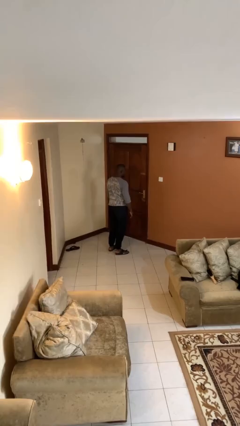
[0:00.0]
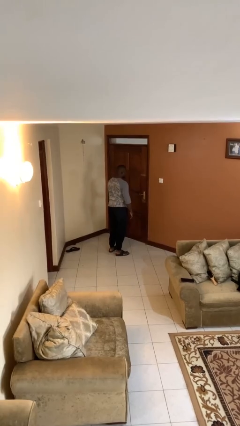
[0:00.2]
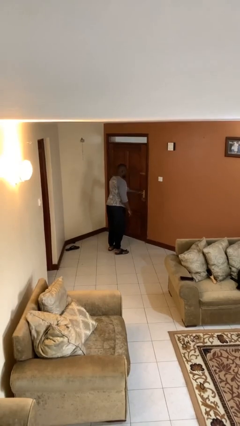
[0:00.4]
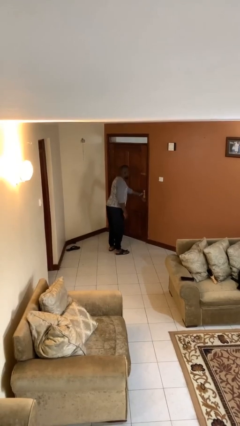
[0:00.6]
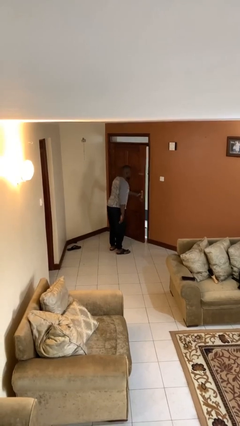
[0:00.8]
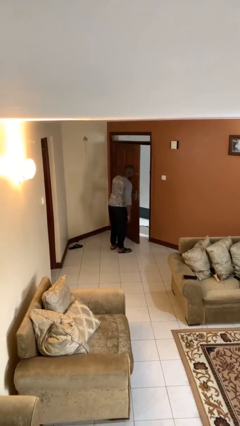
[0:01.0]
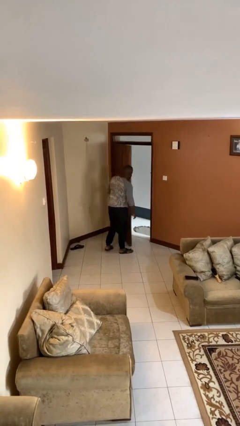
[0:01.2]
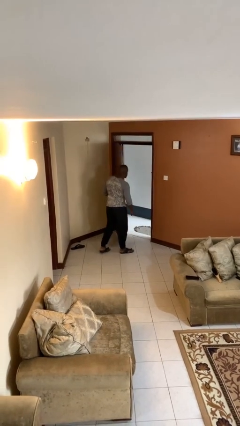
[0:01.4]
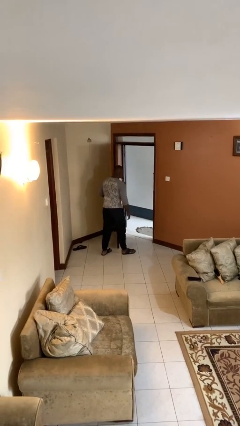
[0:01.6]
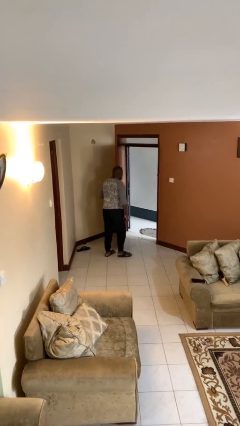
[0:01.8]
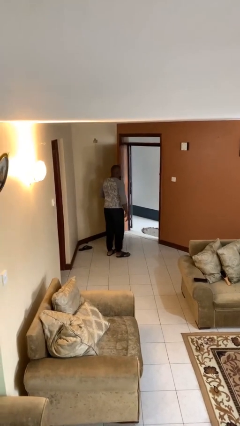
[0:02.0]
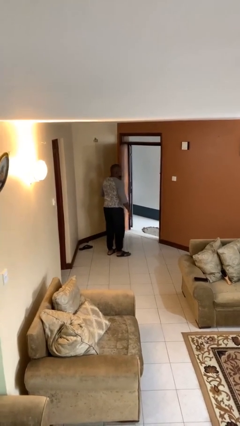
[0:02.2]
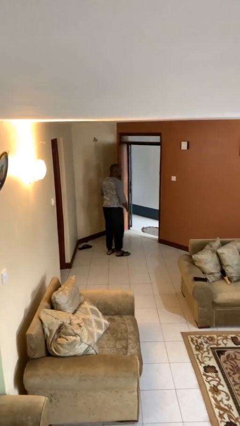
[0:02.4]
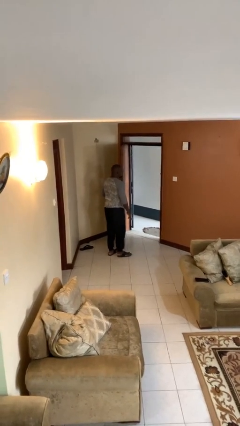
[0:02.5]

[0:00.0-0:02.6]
person opens facility door

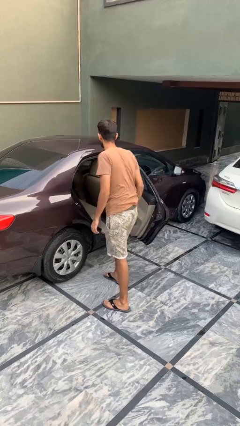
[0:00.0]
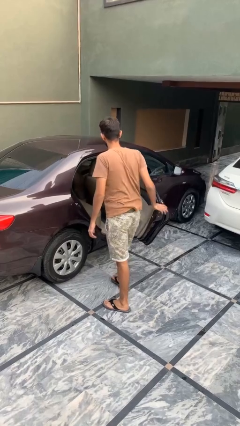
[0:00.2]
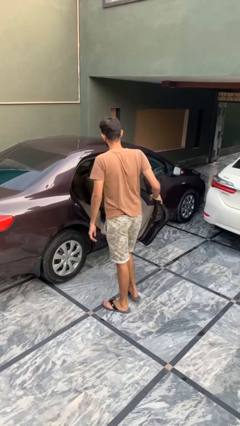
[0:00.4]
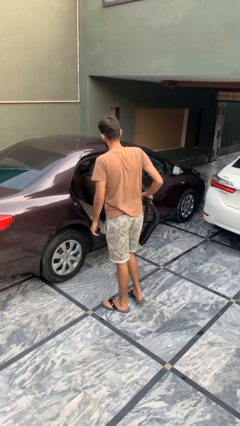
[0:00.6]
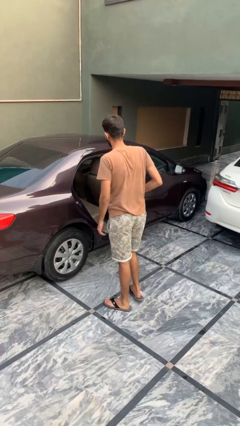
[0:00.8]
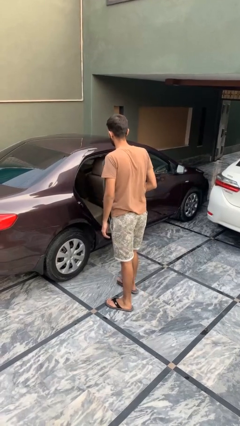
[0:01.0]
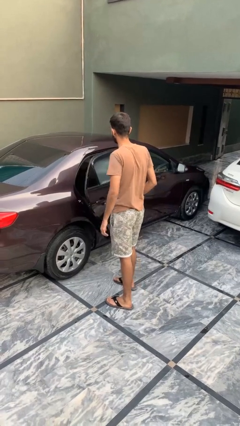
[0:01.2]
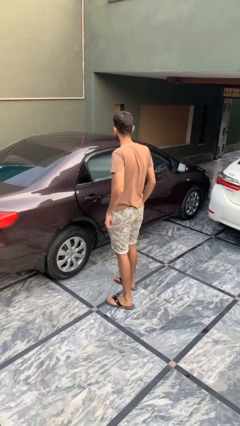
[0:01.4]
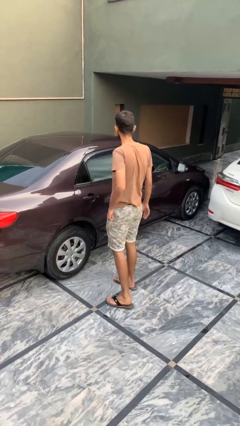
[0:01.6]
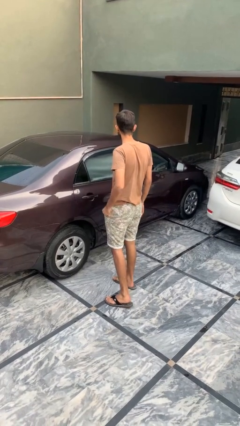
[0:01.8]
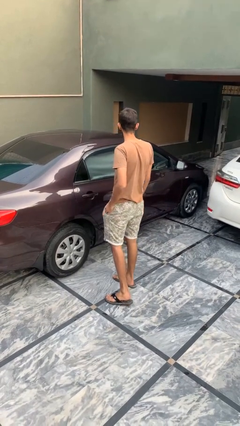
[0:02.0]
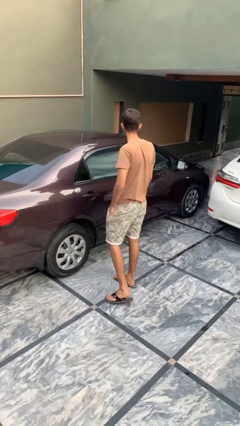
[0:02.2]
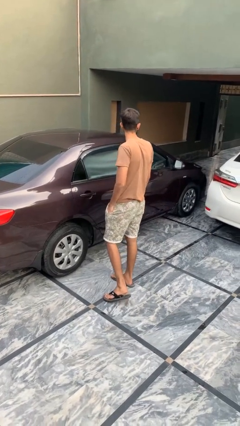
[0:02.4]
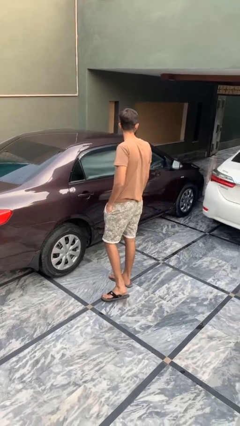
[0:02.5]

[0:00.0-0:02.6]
person closes car door

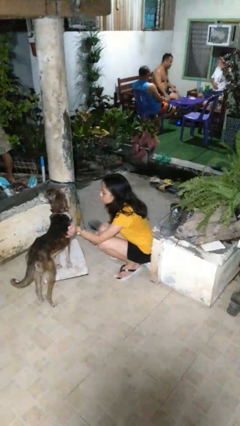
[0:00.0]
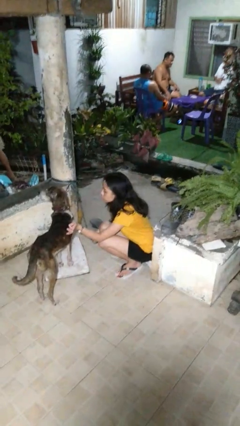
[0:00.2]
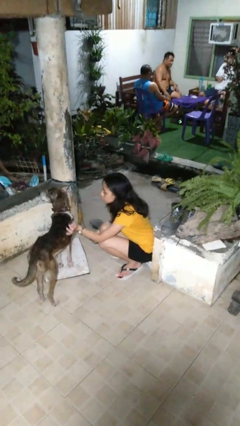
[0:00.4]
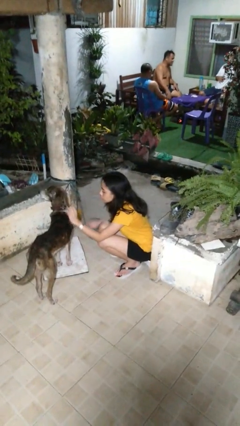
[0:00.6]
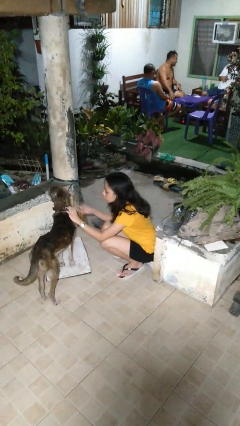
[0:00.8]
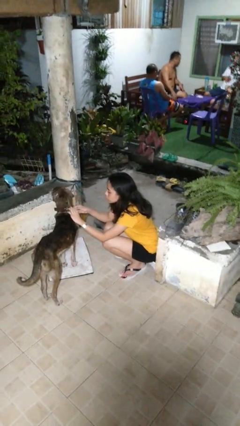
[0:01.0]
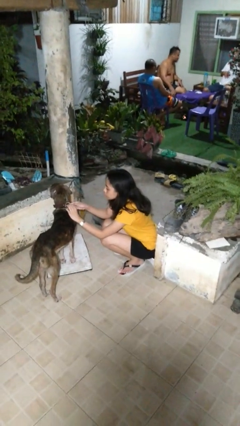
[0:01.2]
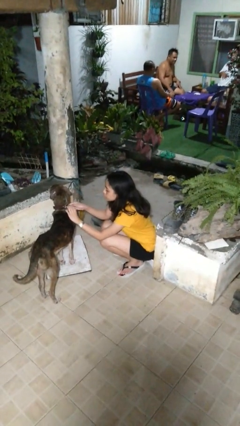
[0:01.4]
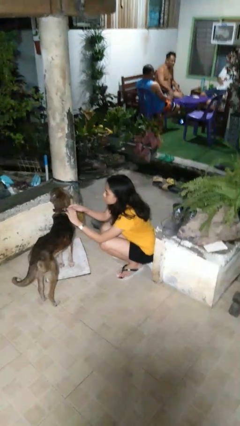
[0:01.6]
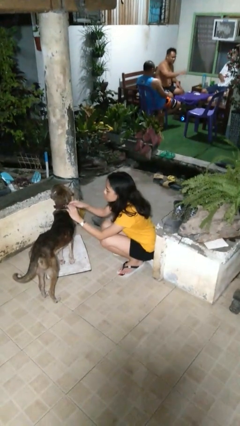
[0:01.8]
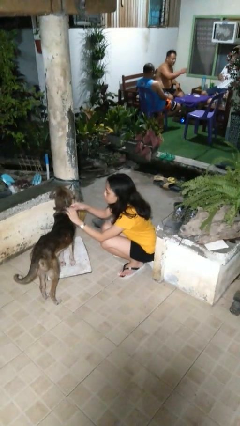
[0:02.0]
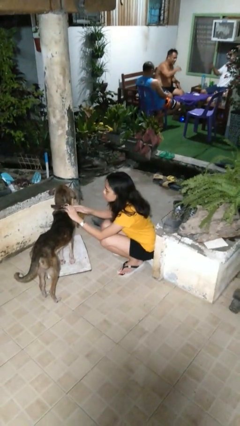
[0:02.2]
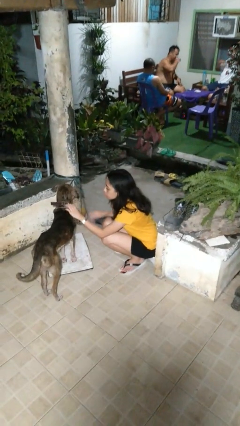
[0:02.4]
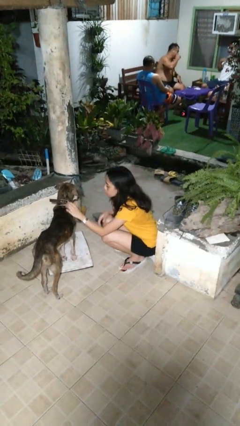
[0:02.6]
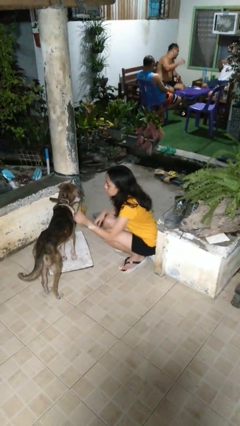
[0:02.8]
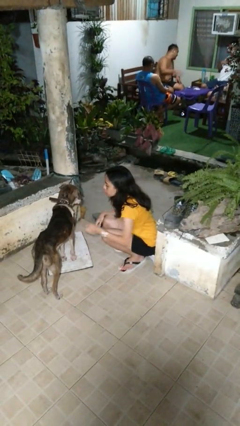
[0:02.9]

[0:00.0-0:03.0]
person attaches leash to dog

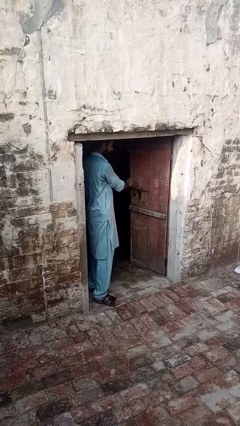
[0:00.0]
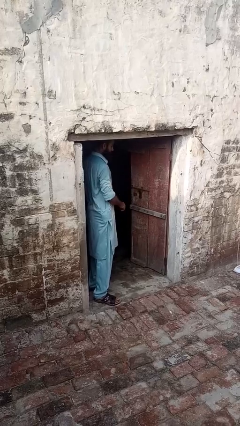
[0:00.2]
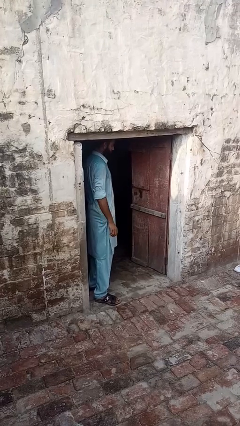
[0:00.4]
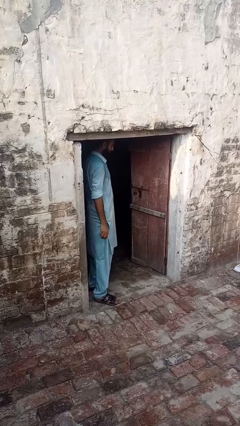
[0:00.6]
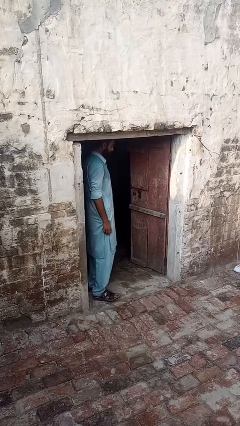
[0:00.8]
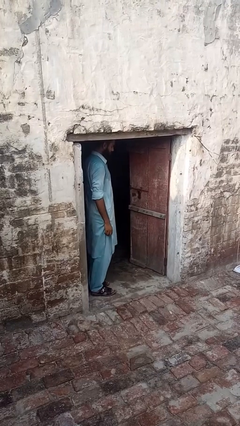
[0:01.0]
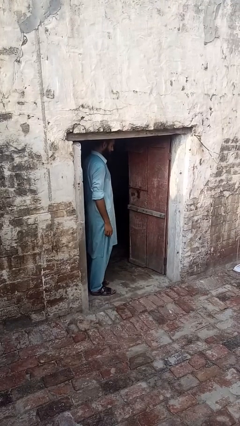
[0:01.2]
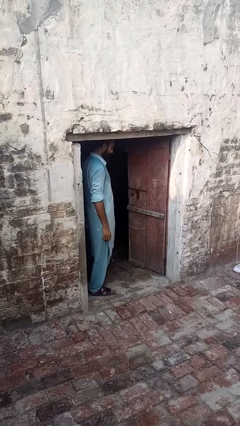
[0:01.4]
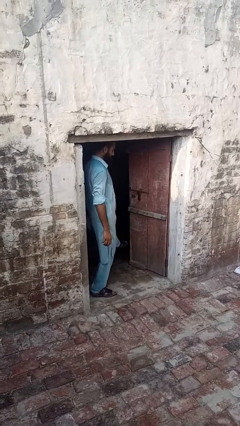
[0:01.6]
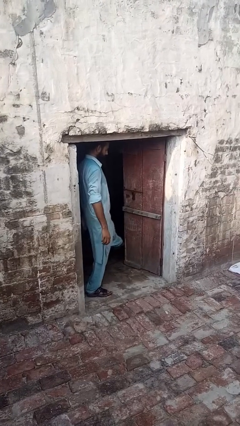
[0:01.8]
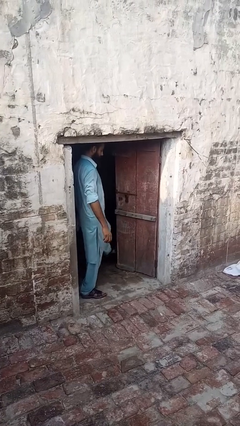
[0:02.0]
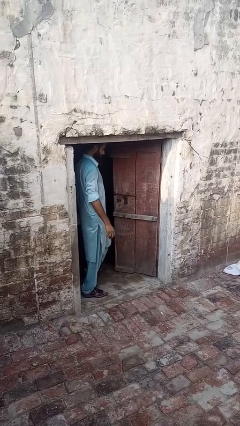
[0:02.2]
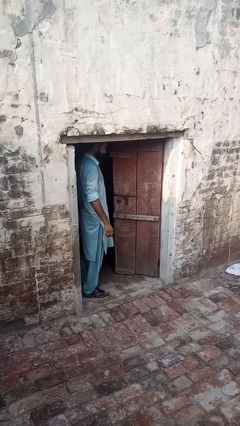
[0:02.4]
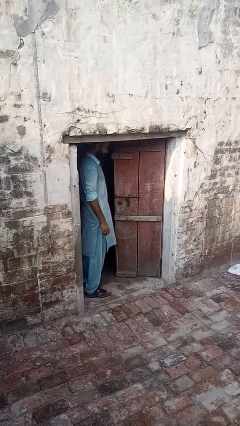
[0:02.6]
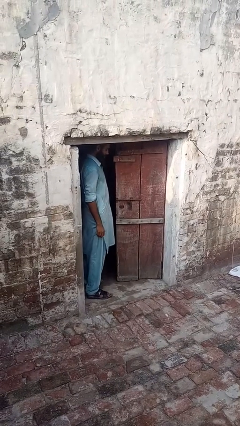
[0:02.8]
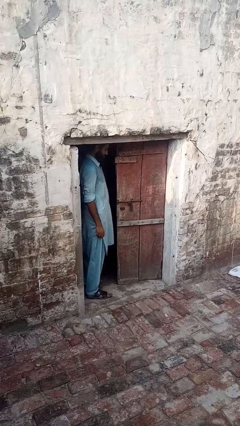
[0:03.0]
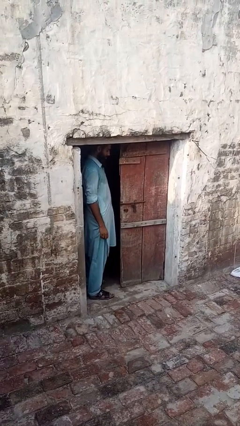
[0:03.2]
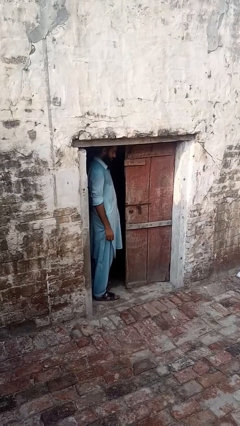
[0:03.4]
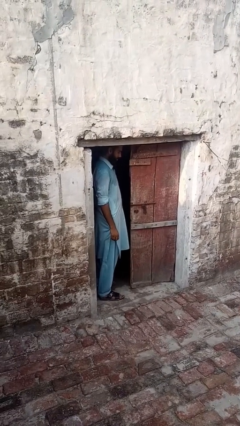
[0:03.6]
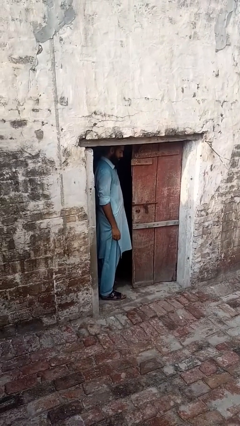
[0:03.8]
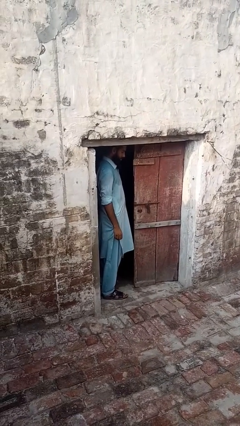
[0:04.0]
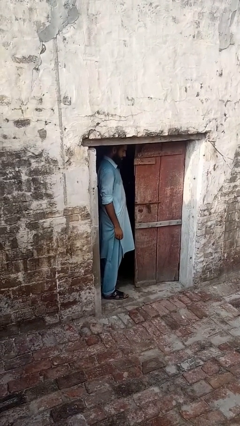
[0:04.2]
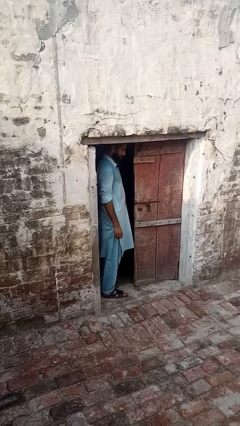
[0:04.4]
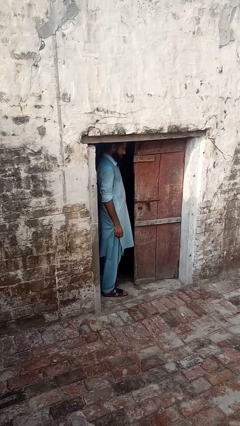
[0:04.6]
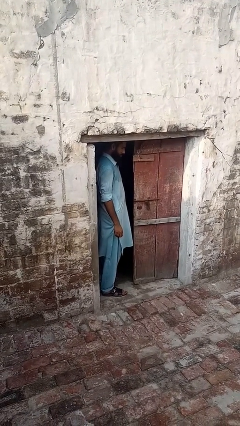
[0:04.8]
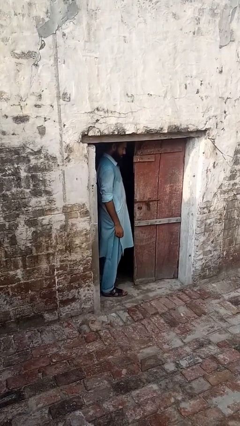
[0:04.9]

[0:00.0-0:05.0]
person closes door with foot

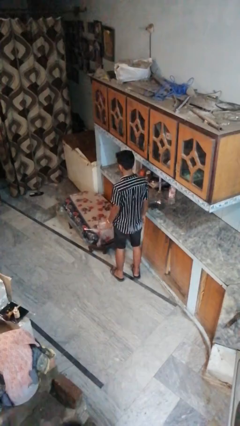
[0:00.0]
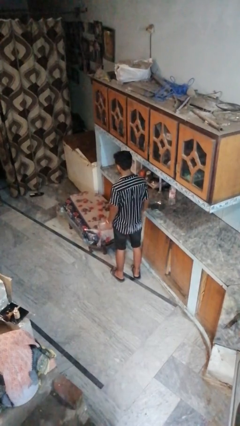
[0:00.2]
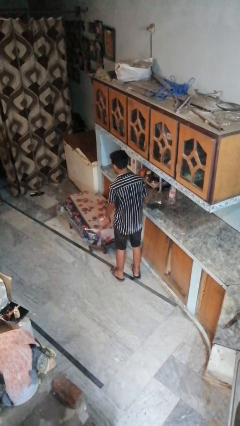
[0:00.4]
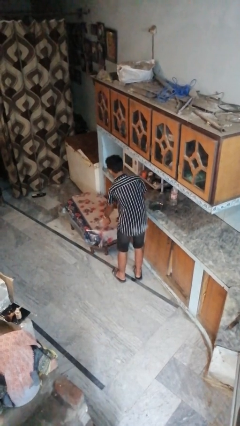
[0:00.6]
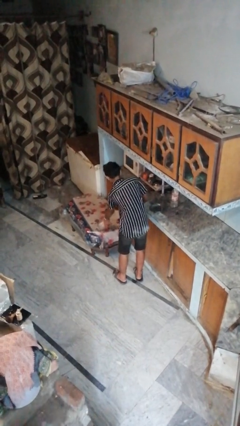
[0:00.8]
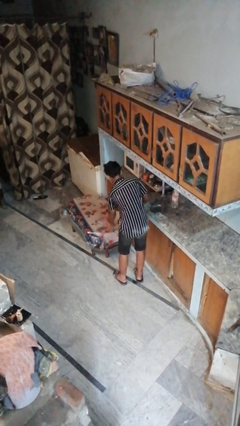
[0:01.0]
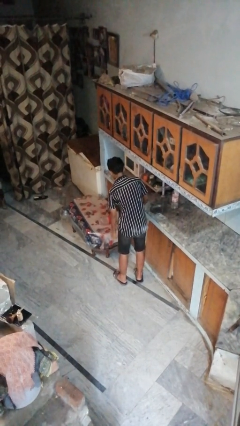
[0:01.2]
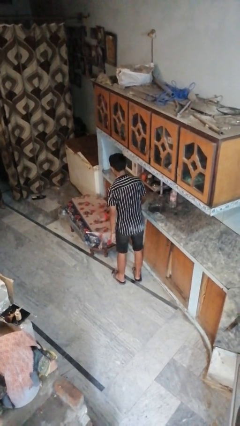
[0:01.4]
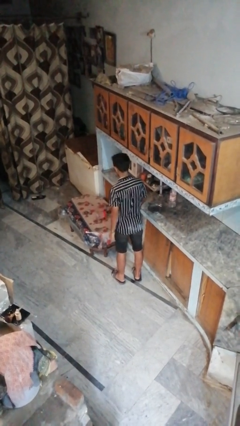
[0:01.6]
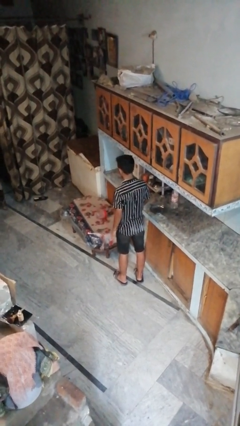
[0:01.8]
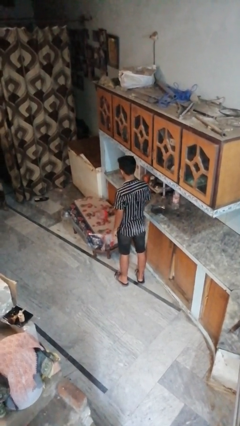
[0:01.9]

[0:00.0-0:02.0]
person throws object on table

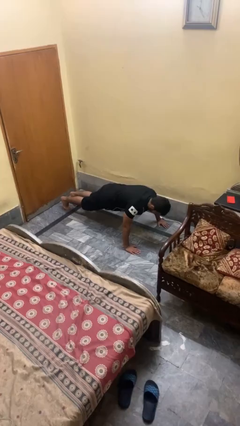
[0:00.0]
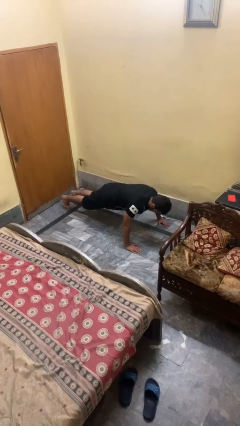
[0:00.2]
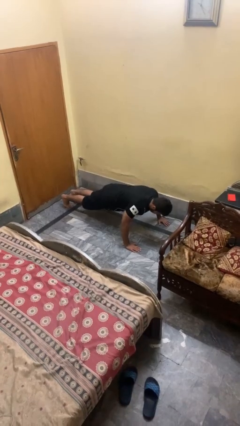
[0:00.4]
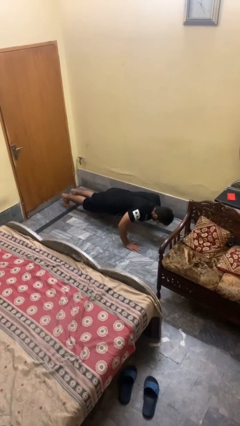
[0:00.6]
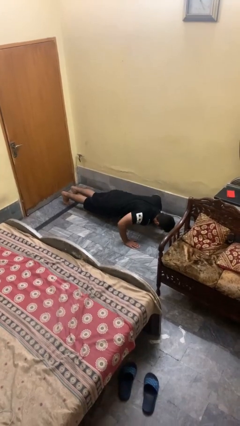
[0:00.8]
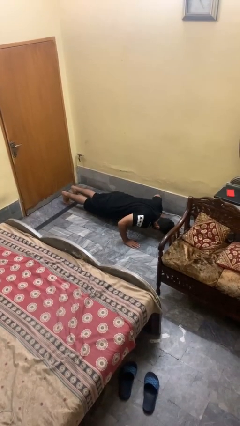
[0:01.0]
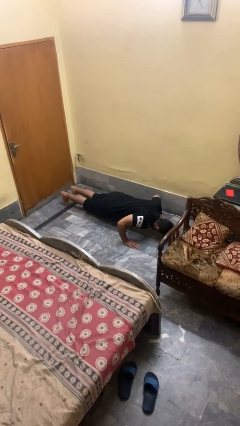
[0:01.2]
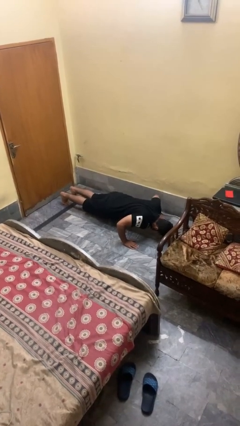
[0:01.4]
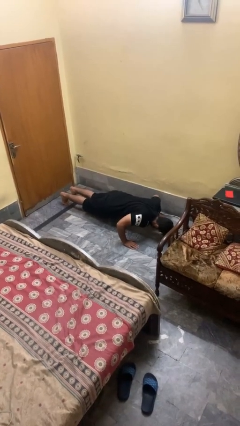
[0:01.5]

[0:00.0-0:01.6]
person exercises with pushup

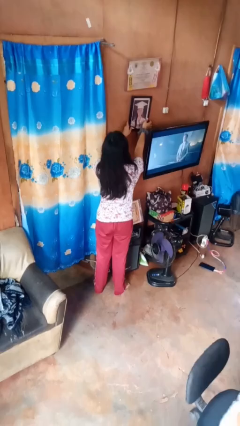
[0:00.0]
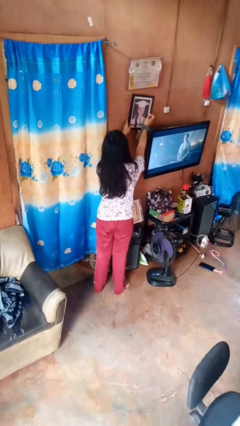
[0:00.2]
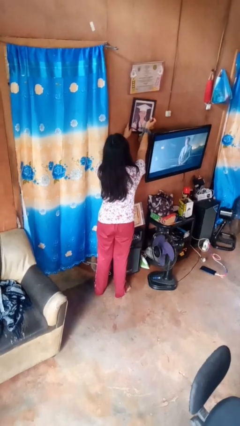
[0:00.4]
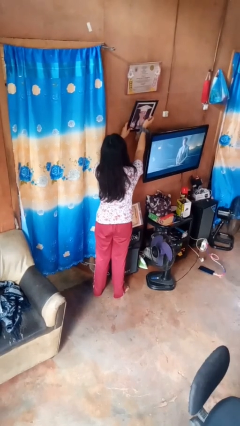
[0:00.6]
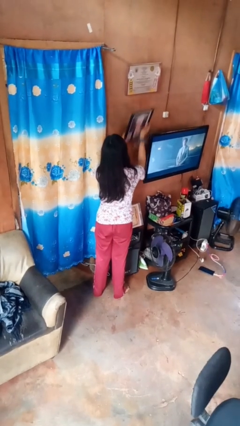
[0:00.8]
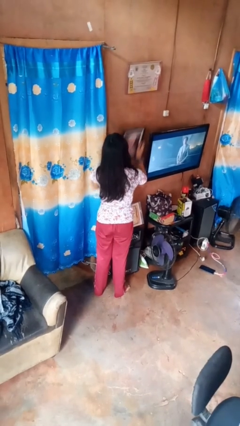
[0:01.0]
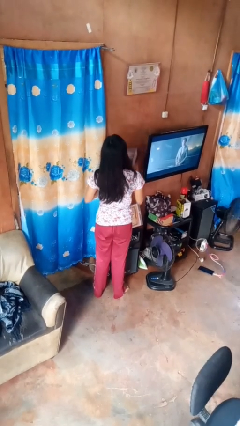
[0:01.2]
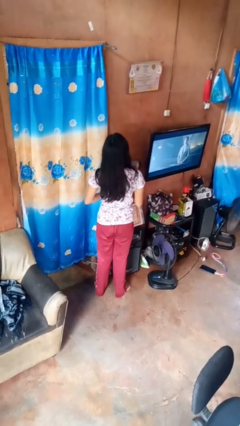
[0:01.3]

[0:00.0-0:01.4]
person takes down picture frame
